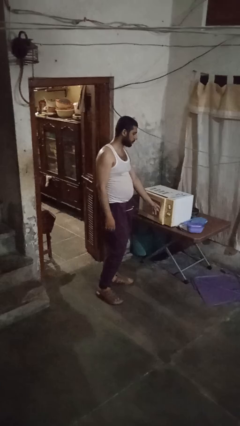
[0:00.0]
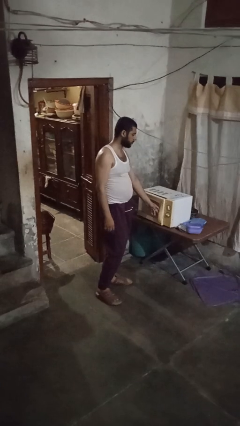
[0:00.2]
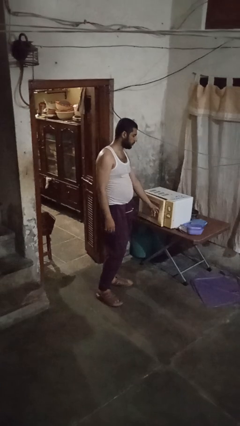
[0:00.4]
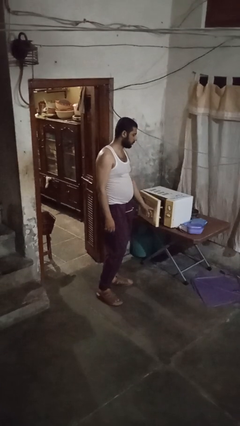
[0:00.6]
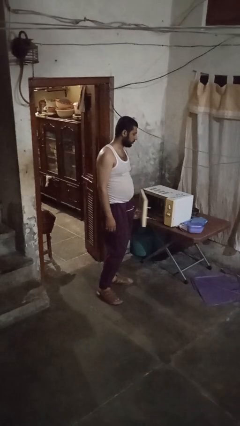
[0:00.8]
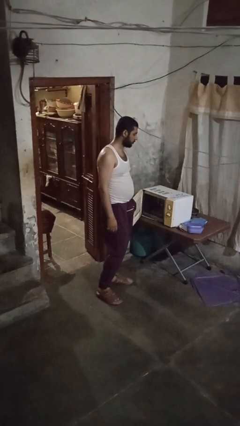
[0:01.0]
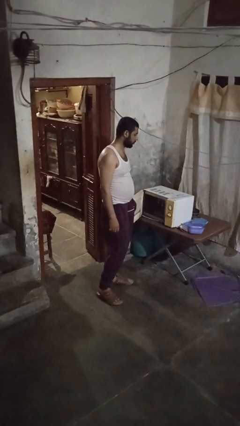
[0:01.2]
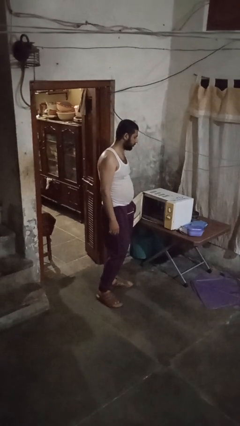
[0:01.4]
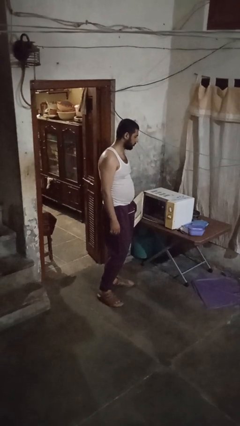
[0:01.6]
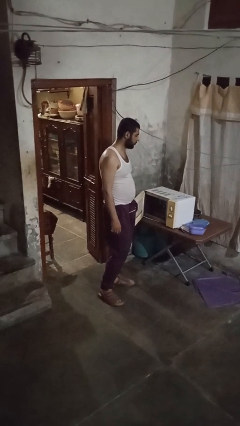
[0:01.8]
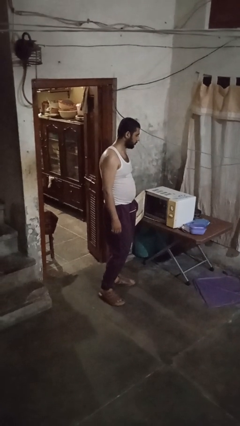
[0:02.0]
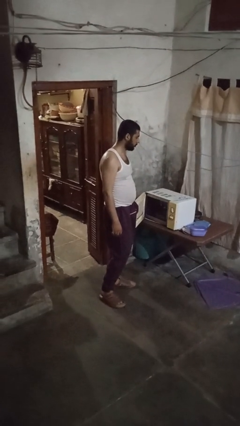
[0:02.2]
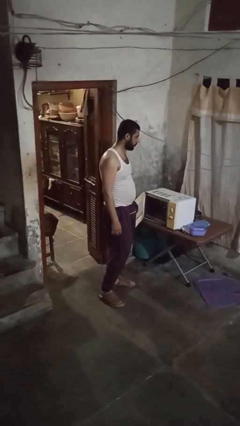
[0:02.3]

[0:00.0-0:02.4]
person opens microwave

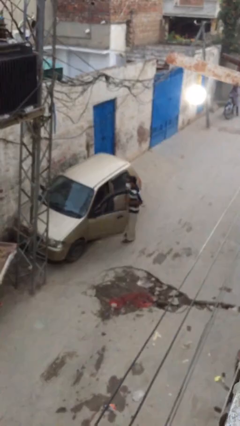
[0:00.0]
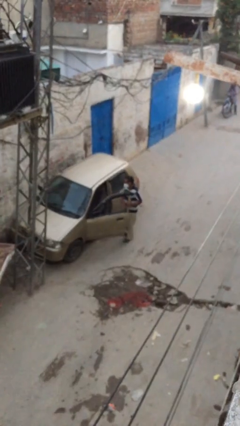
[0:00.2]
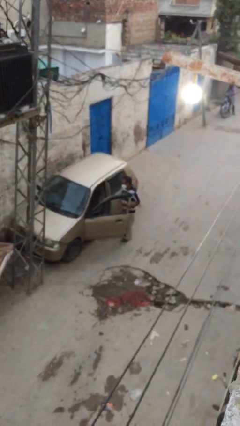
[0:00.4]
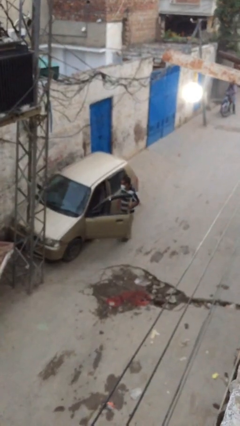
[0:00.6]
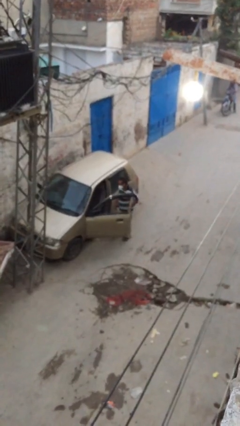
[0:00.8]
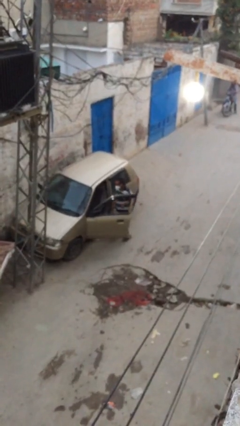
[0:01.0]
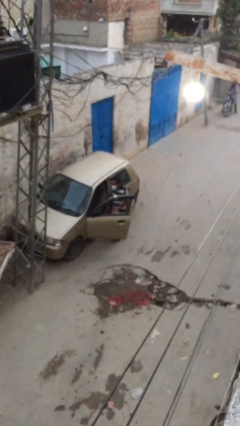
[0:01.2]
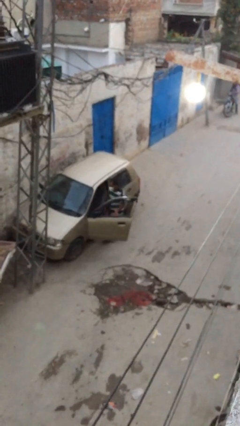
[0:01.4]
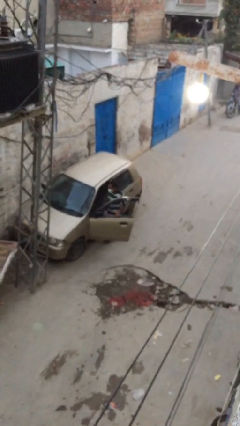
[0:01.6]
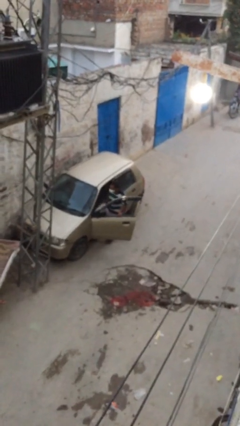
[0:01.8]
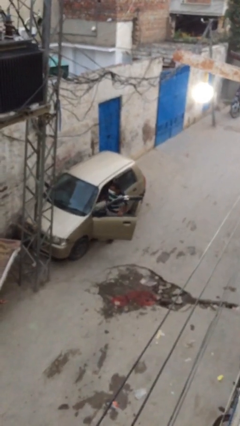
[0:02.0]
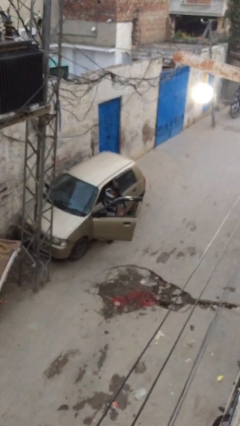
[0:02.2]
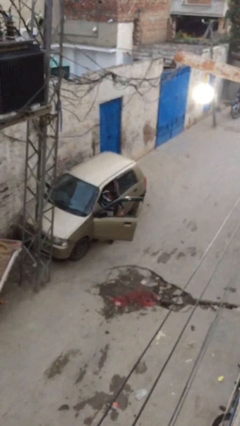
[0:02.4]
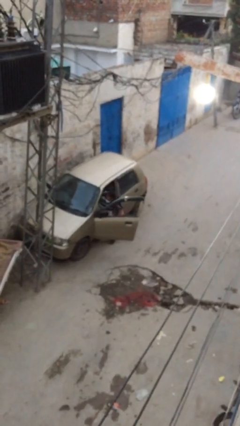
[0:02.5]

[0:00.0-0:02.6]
person enters car

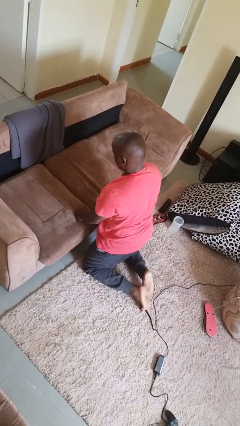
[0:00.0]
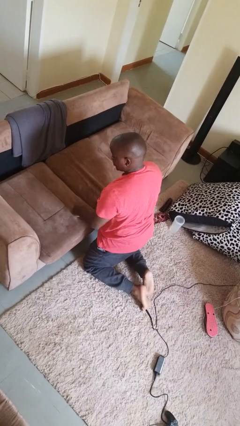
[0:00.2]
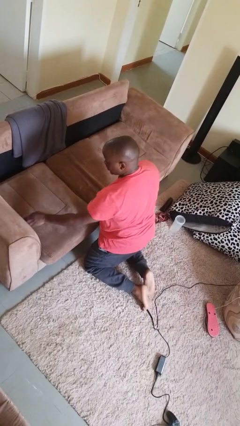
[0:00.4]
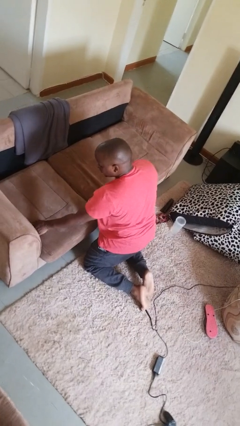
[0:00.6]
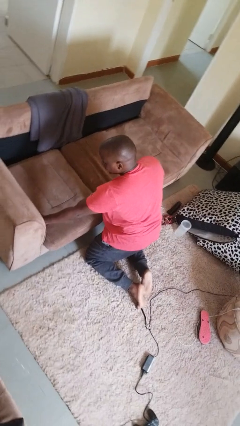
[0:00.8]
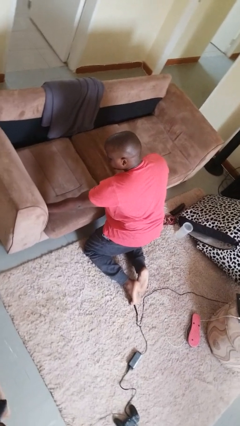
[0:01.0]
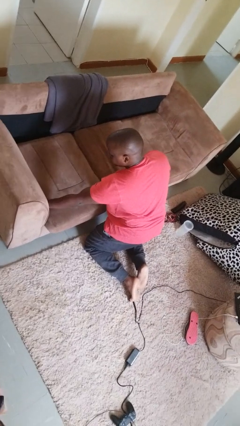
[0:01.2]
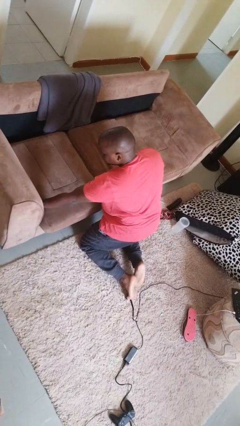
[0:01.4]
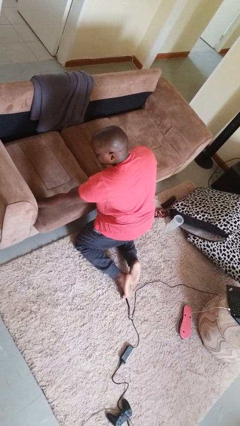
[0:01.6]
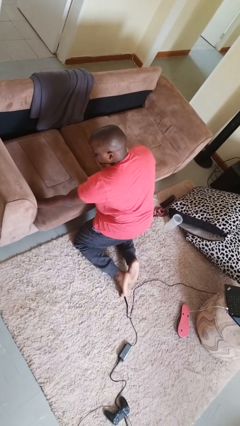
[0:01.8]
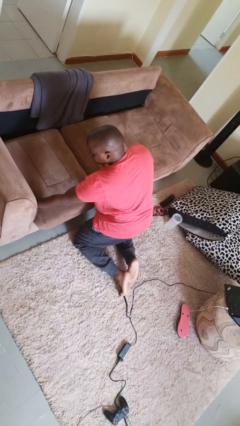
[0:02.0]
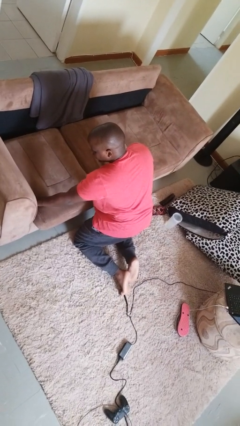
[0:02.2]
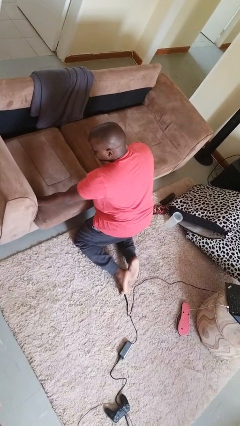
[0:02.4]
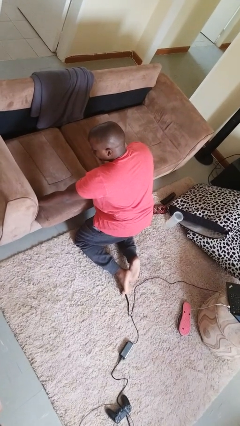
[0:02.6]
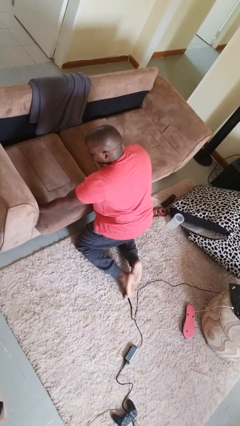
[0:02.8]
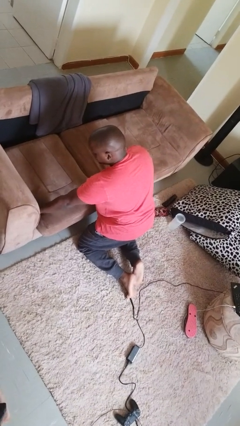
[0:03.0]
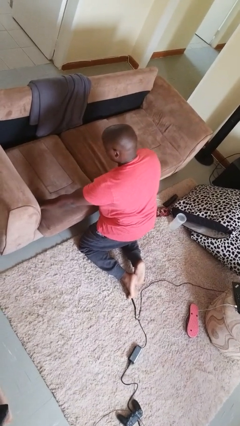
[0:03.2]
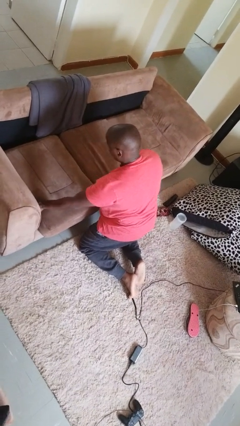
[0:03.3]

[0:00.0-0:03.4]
person searches in couch

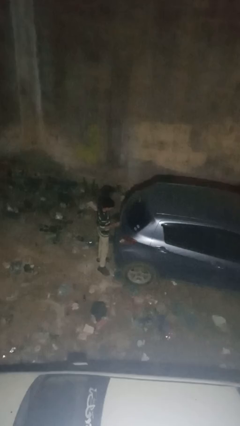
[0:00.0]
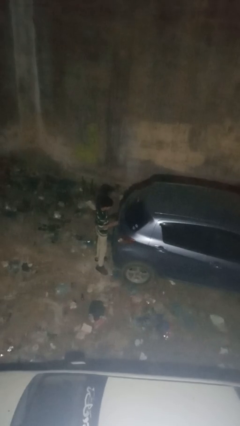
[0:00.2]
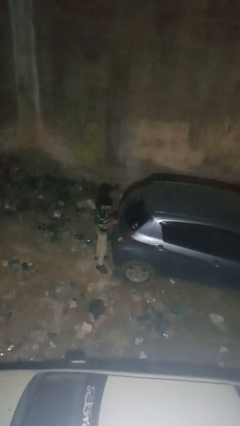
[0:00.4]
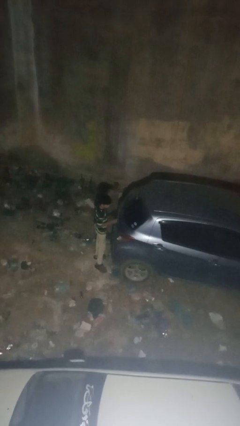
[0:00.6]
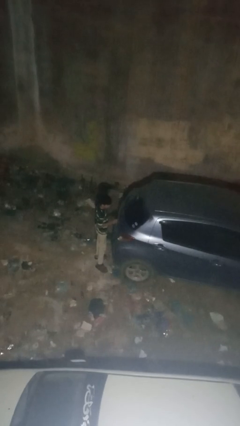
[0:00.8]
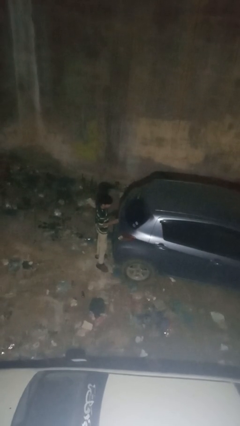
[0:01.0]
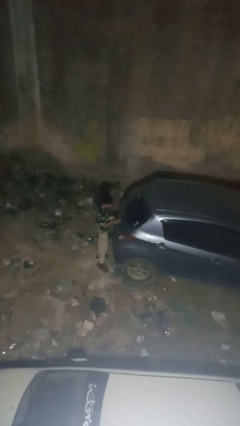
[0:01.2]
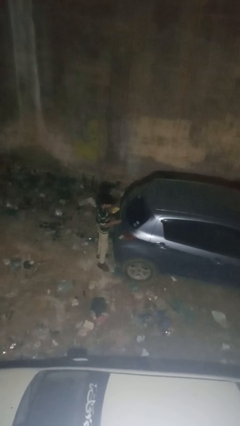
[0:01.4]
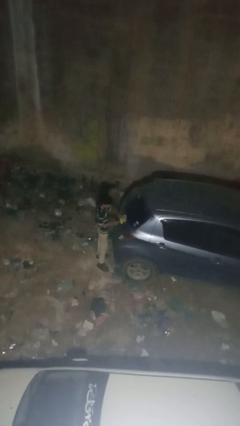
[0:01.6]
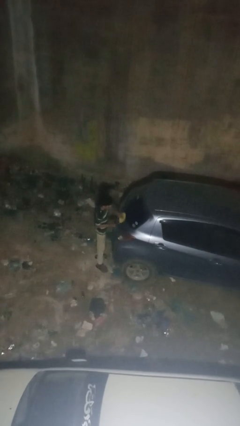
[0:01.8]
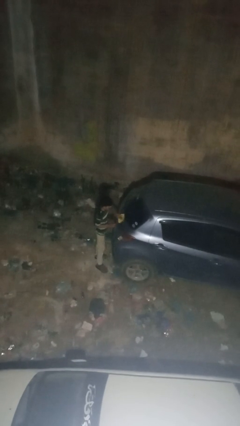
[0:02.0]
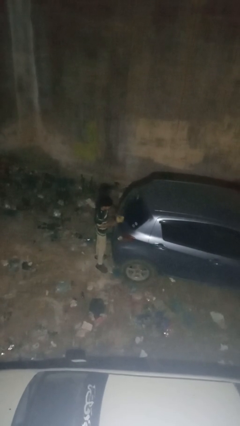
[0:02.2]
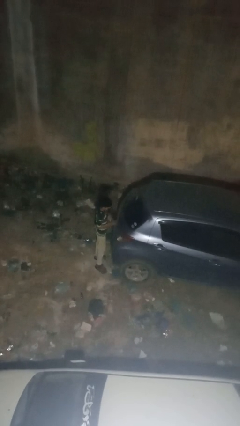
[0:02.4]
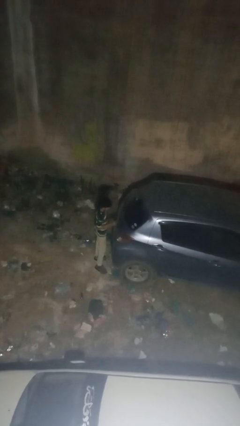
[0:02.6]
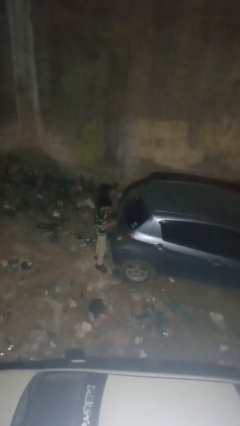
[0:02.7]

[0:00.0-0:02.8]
person polishes car with rag

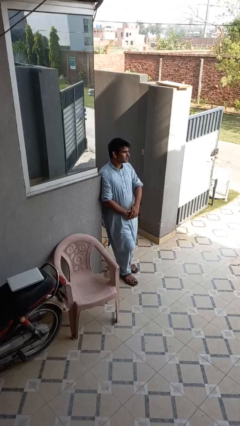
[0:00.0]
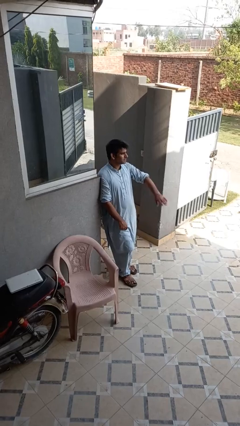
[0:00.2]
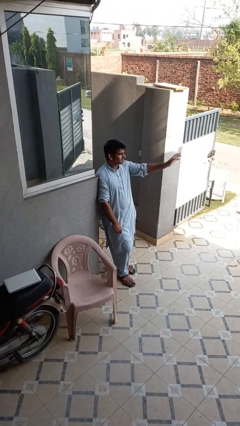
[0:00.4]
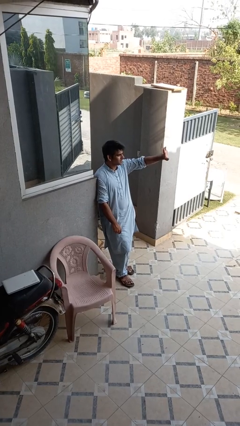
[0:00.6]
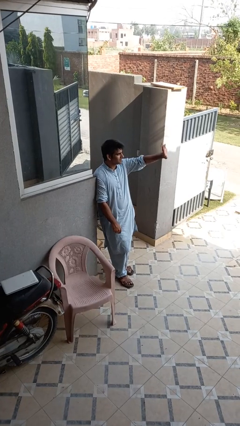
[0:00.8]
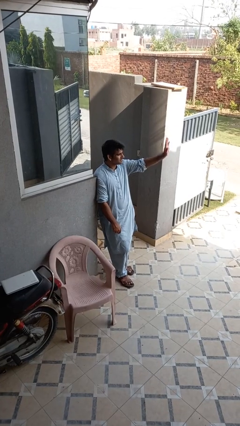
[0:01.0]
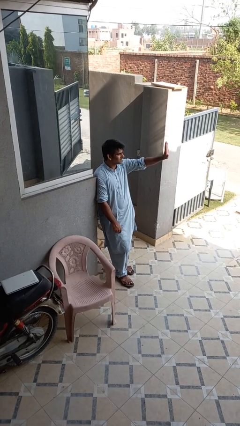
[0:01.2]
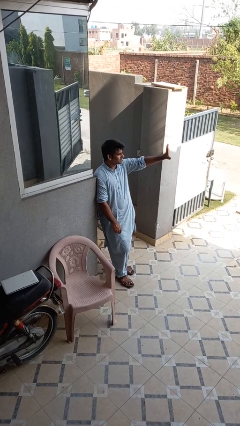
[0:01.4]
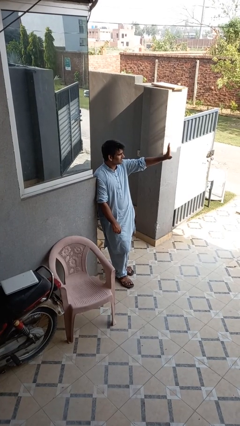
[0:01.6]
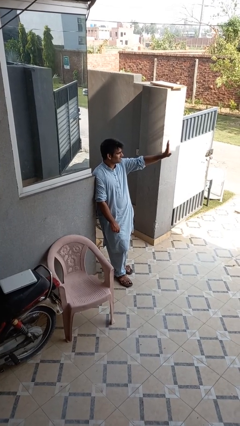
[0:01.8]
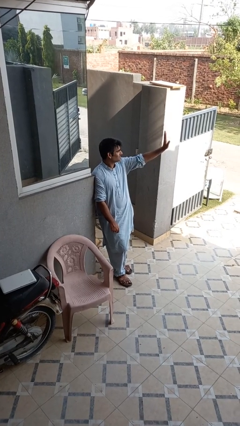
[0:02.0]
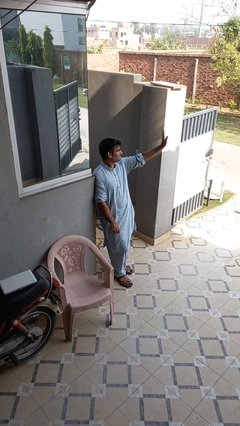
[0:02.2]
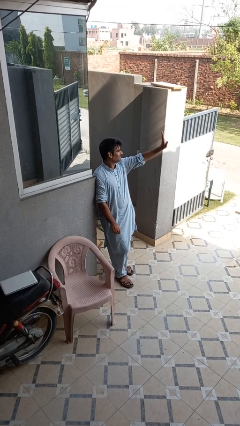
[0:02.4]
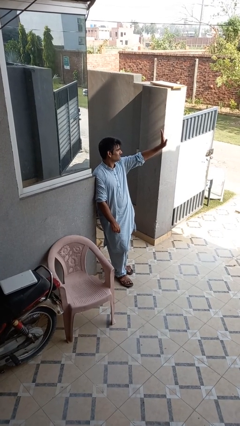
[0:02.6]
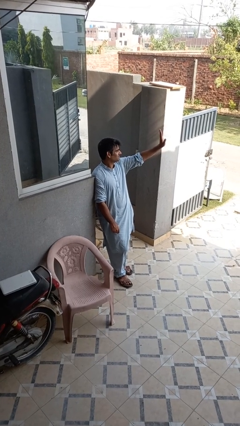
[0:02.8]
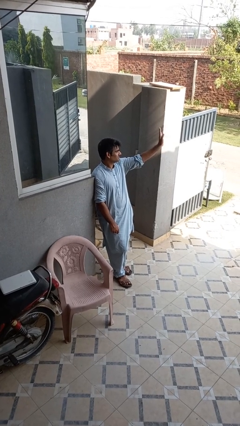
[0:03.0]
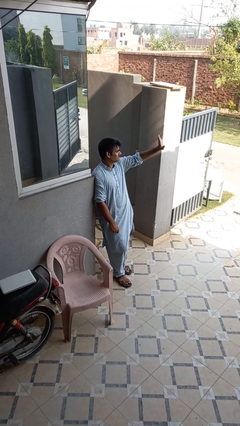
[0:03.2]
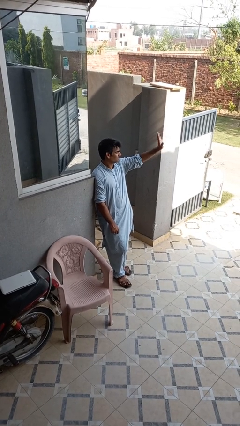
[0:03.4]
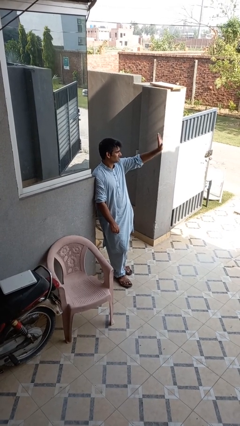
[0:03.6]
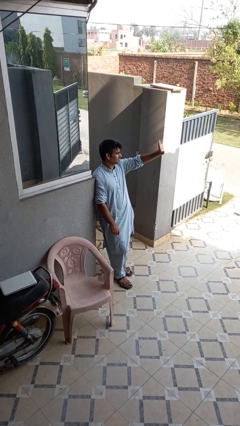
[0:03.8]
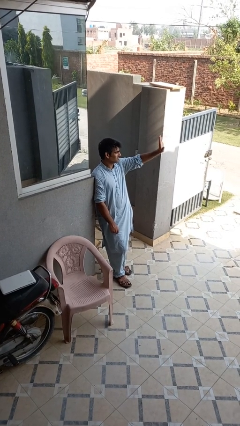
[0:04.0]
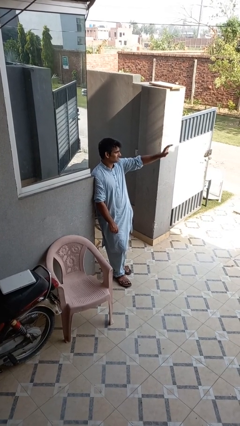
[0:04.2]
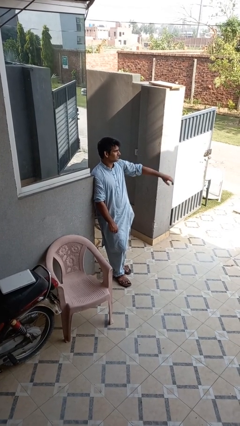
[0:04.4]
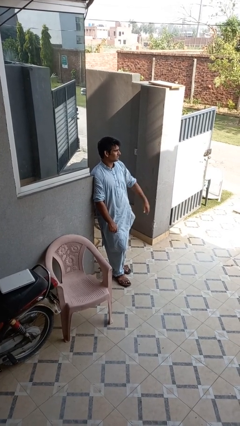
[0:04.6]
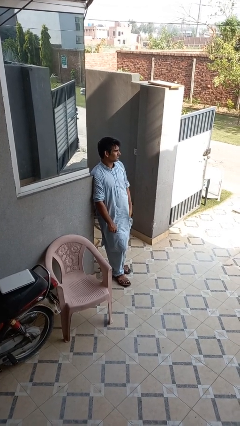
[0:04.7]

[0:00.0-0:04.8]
person waves at person

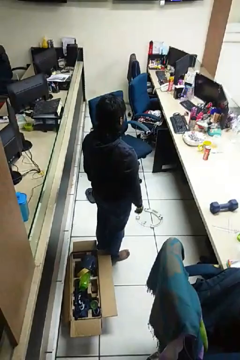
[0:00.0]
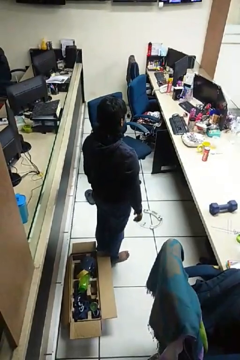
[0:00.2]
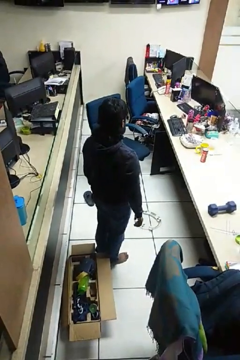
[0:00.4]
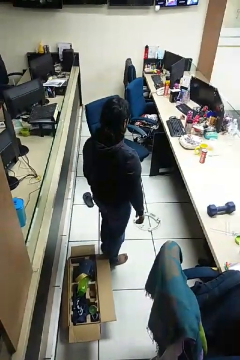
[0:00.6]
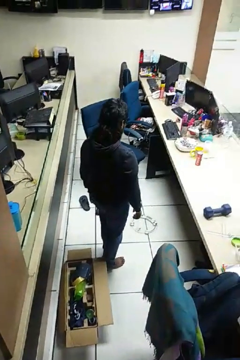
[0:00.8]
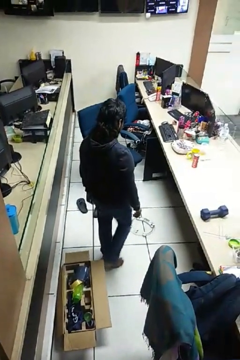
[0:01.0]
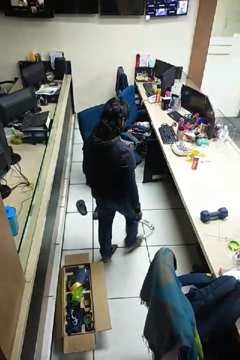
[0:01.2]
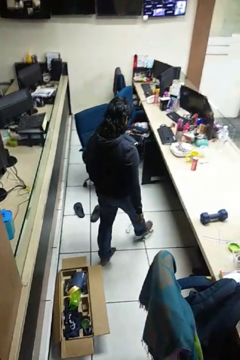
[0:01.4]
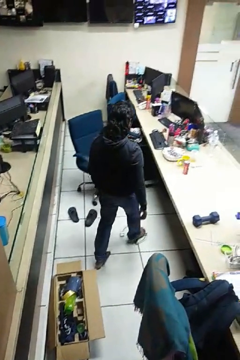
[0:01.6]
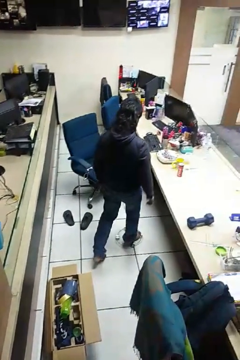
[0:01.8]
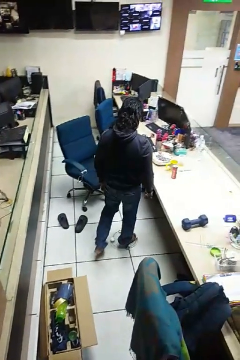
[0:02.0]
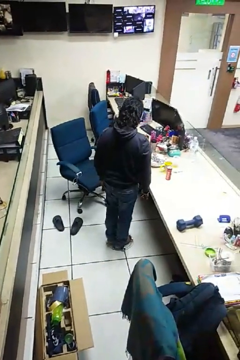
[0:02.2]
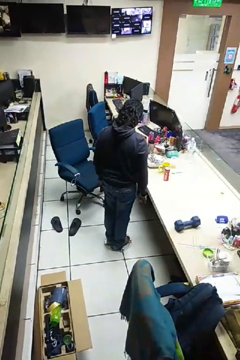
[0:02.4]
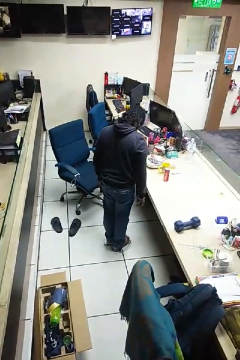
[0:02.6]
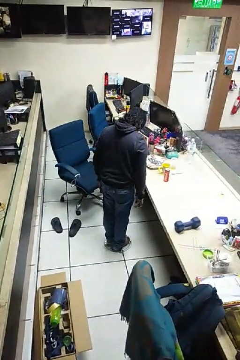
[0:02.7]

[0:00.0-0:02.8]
person uses bodyweight scale
